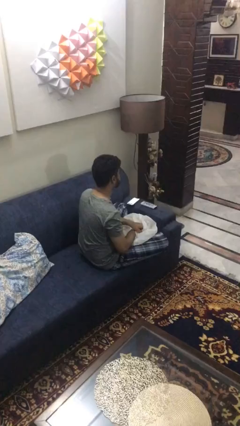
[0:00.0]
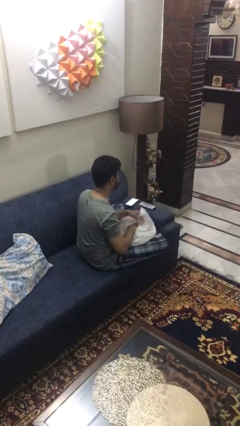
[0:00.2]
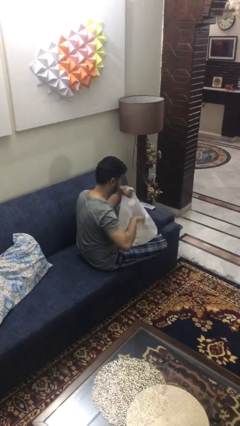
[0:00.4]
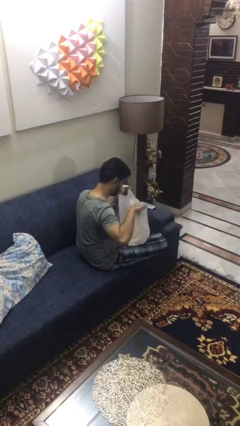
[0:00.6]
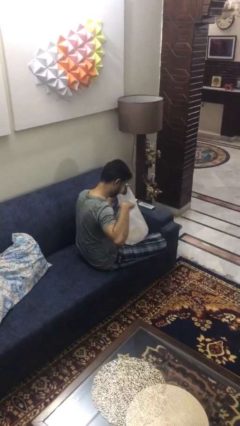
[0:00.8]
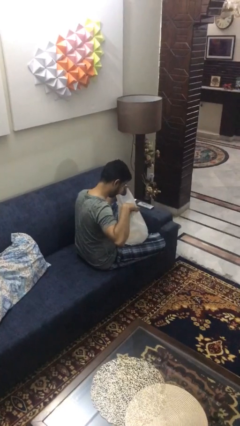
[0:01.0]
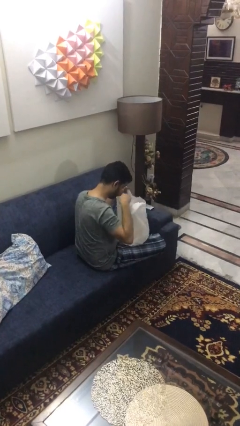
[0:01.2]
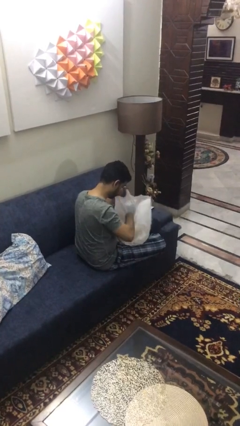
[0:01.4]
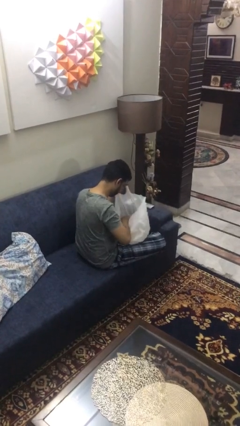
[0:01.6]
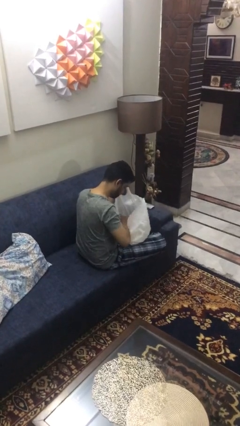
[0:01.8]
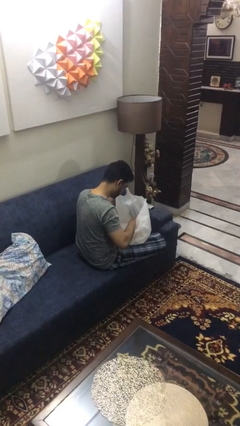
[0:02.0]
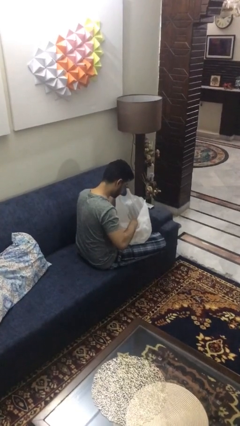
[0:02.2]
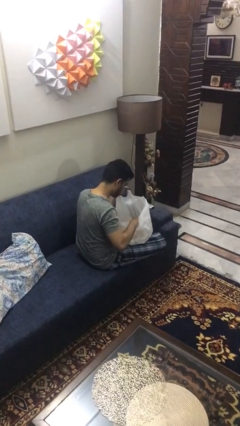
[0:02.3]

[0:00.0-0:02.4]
person searches in bag

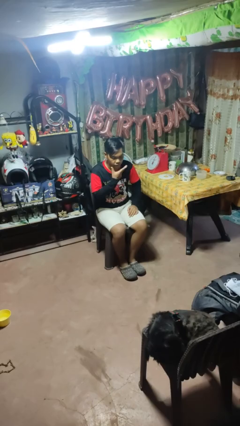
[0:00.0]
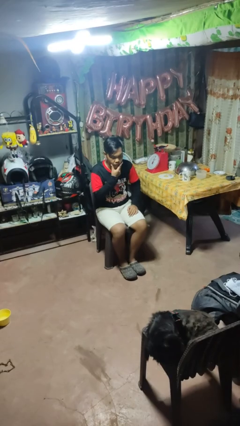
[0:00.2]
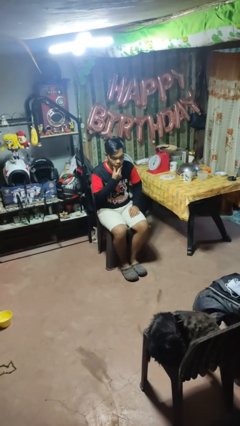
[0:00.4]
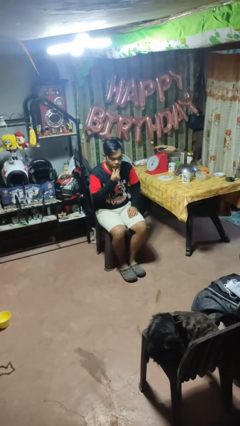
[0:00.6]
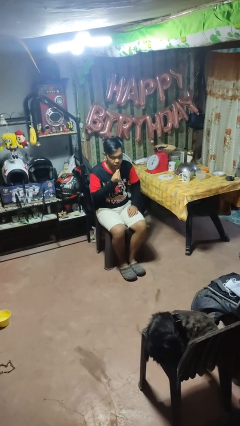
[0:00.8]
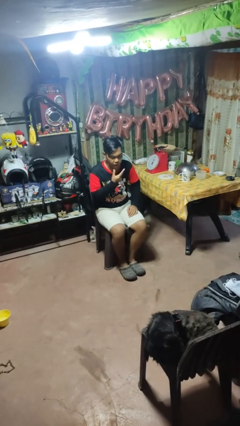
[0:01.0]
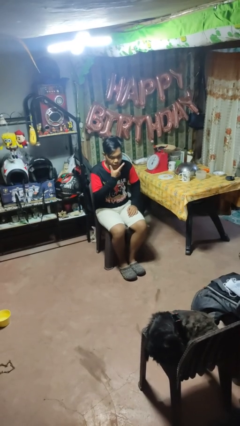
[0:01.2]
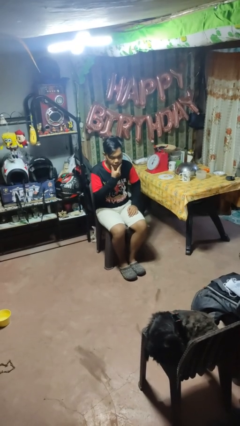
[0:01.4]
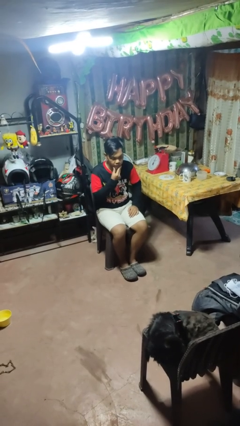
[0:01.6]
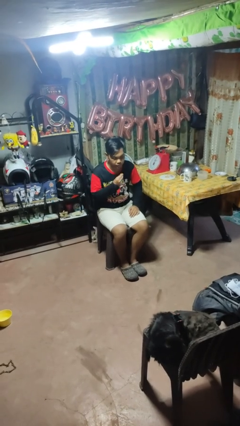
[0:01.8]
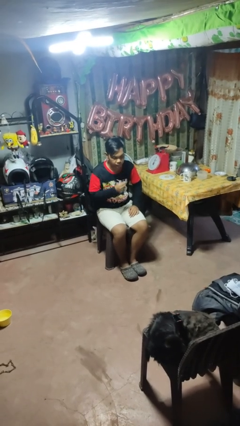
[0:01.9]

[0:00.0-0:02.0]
person strokes chin

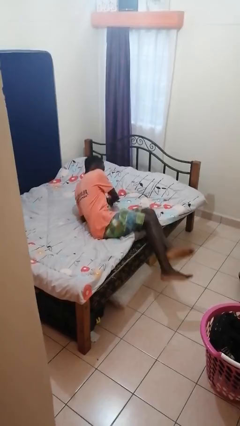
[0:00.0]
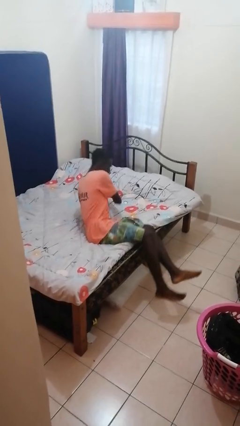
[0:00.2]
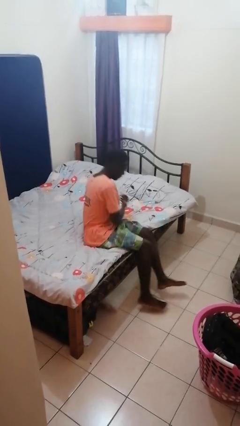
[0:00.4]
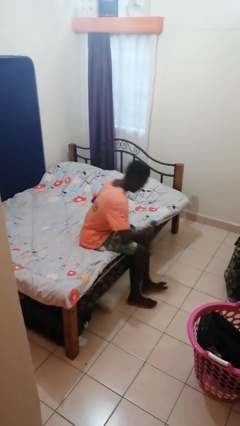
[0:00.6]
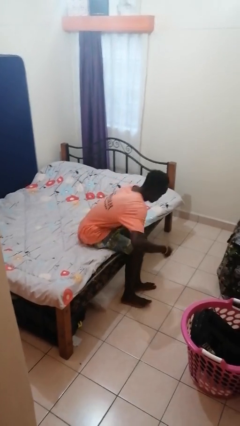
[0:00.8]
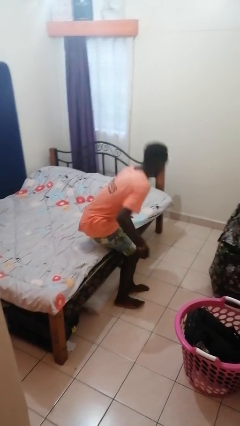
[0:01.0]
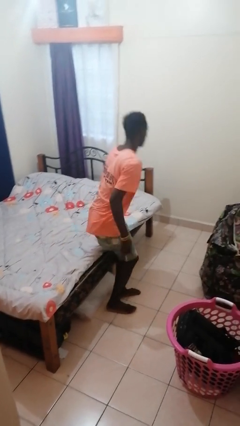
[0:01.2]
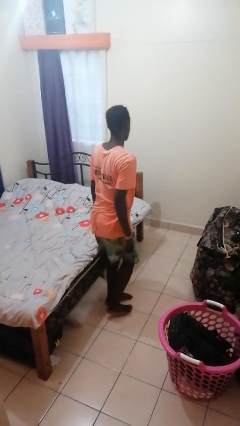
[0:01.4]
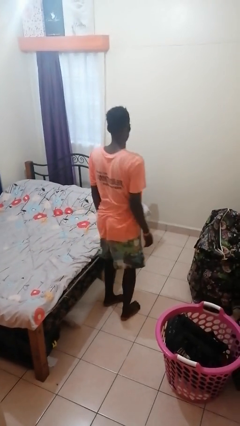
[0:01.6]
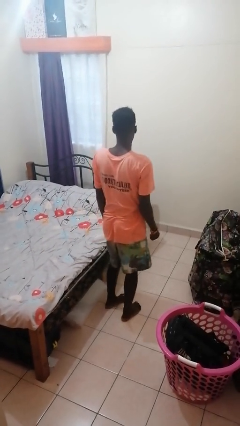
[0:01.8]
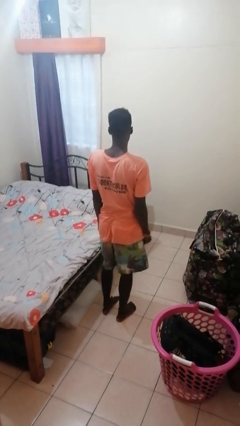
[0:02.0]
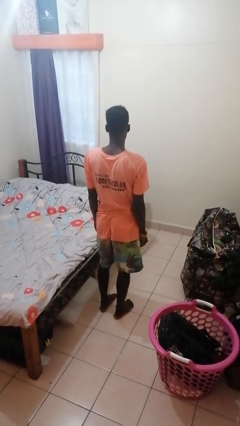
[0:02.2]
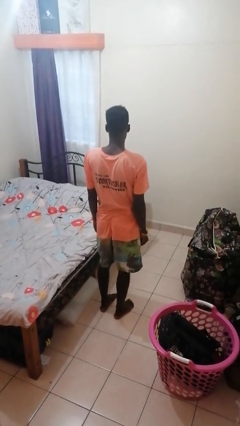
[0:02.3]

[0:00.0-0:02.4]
person stands up

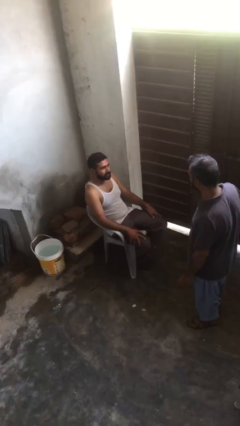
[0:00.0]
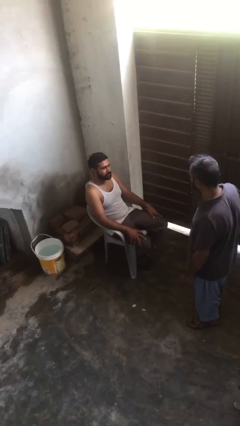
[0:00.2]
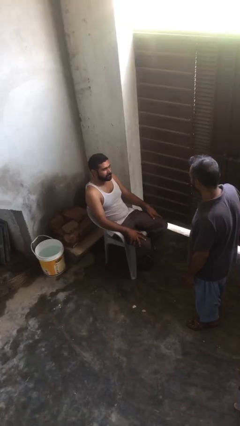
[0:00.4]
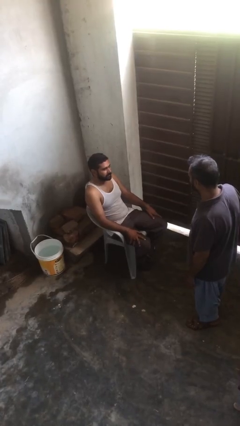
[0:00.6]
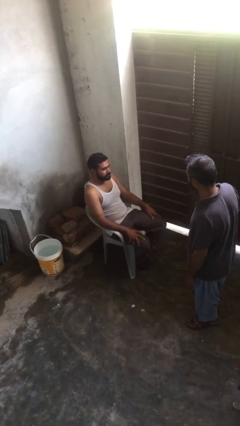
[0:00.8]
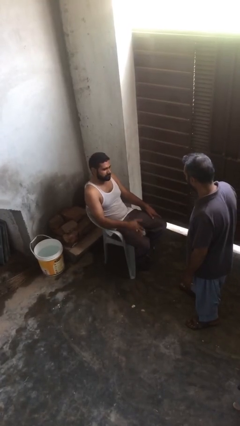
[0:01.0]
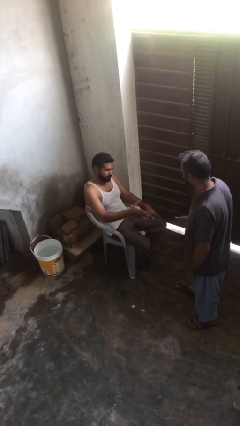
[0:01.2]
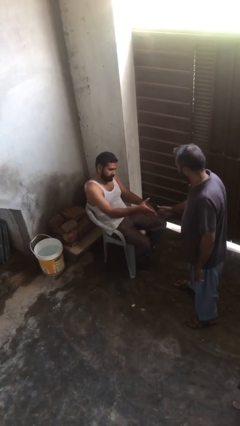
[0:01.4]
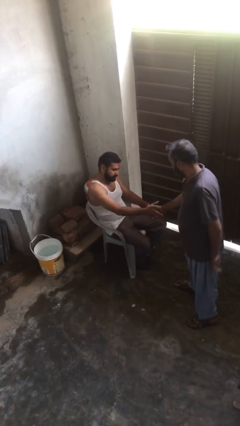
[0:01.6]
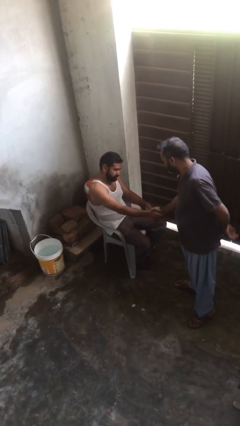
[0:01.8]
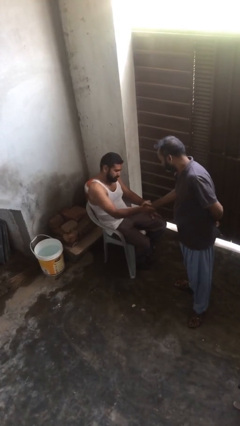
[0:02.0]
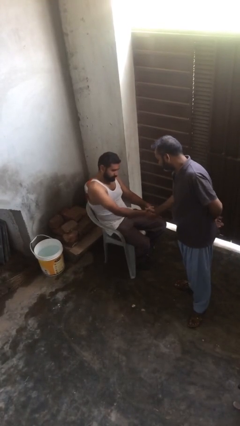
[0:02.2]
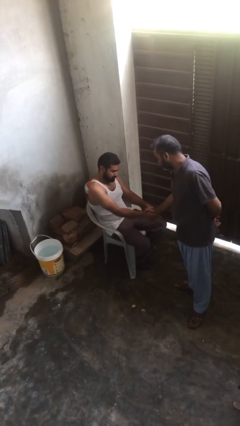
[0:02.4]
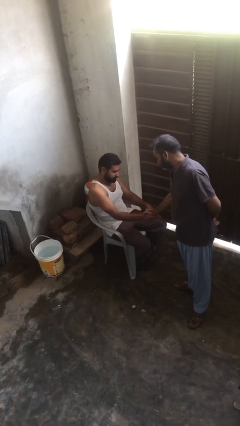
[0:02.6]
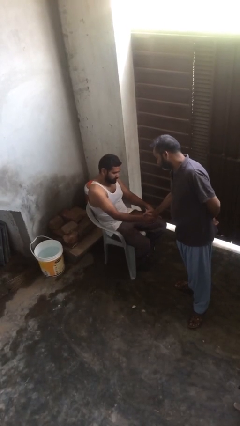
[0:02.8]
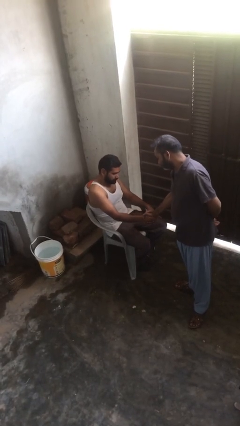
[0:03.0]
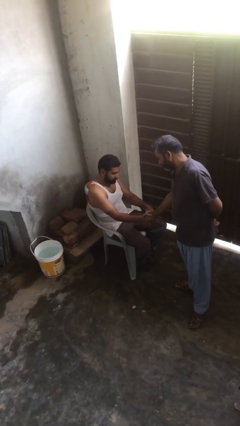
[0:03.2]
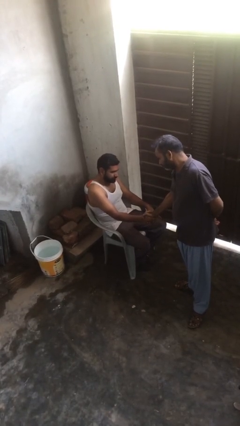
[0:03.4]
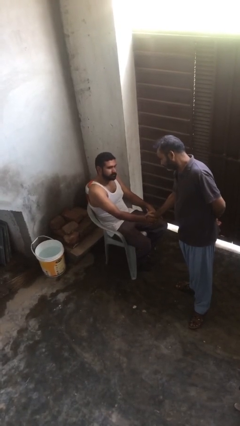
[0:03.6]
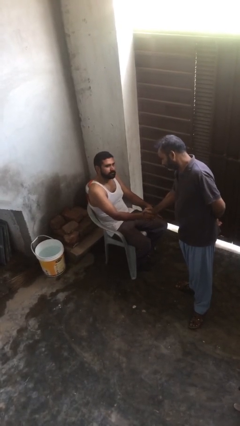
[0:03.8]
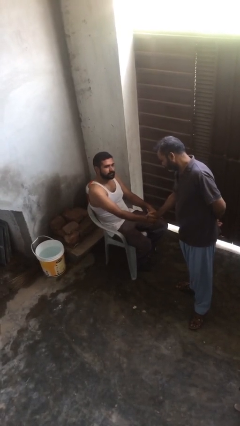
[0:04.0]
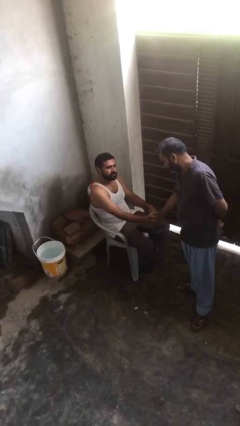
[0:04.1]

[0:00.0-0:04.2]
person shakes hand

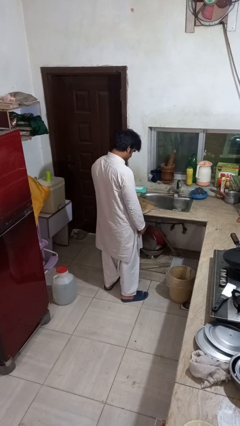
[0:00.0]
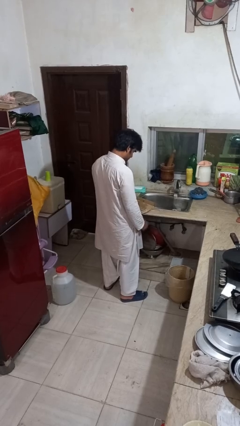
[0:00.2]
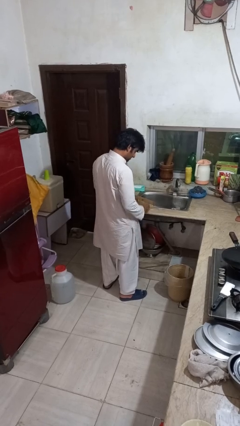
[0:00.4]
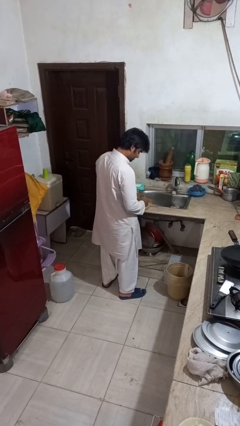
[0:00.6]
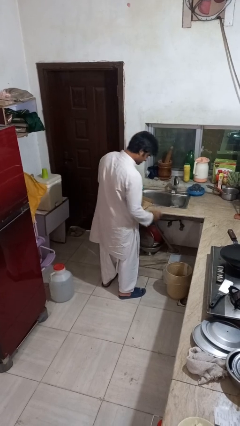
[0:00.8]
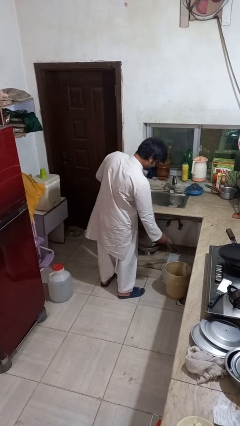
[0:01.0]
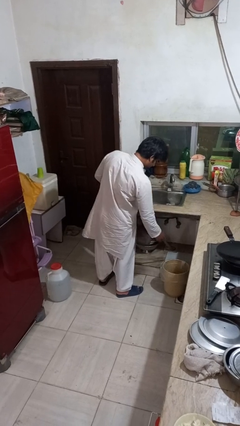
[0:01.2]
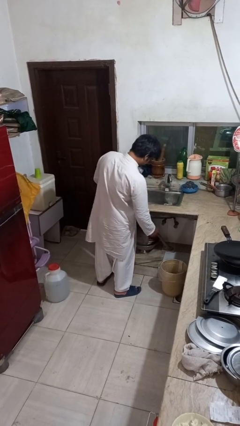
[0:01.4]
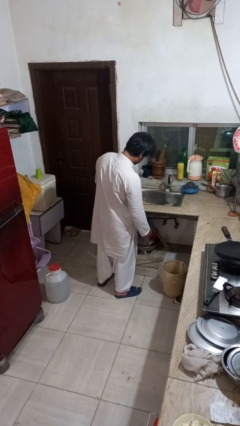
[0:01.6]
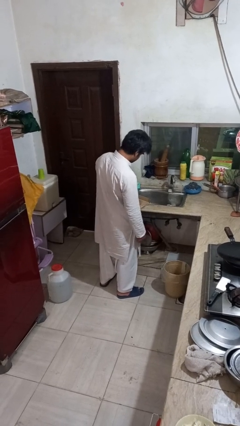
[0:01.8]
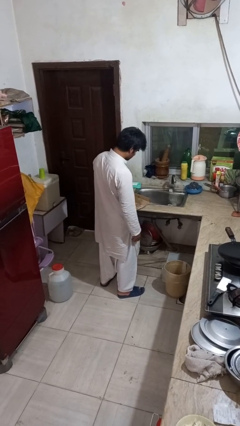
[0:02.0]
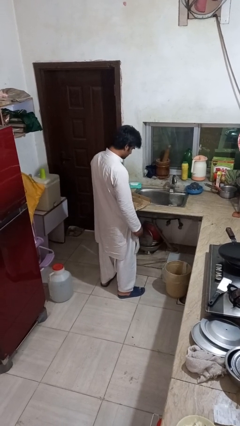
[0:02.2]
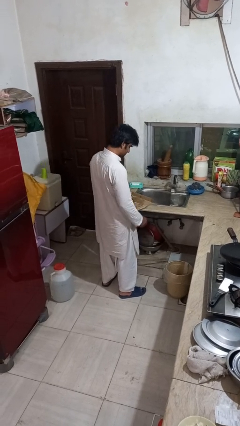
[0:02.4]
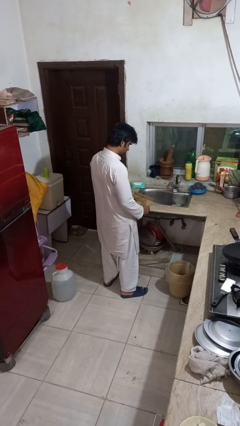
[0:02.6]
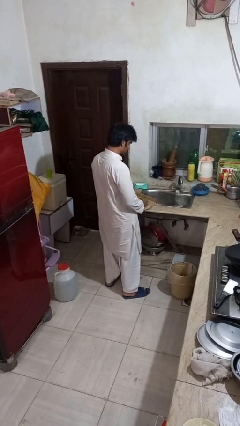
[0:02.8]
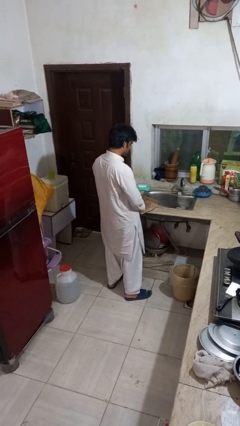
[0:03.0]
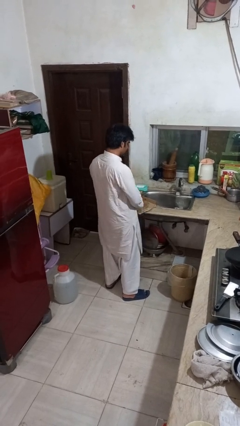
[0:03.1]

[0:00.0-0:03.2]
person discards trash

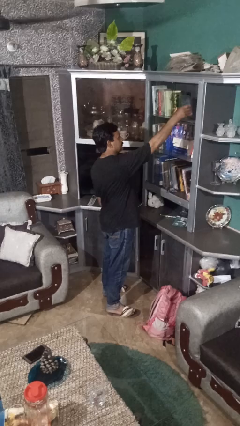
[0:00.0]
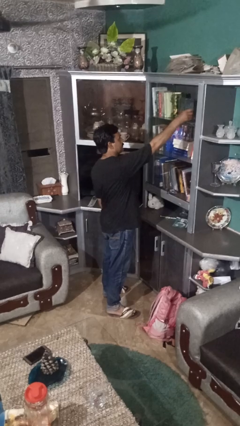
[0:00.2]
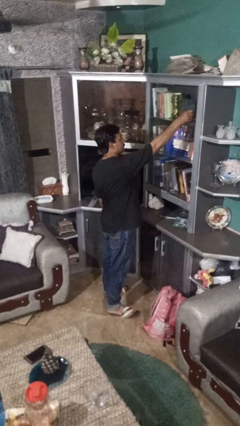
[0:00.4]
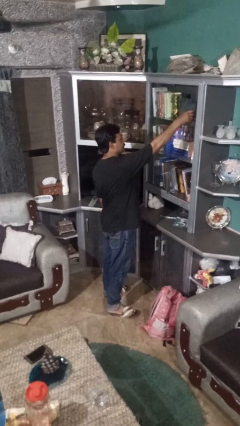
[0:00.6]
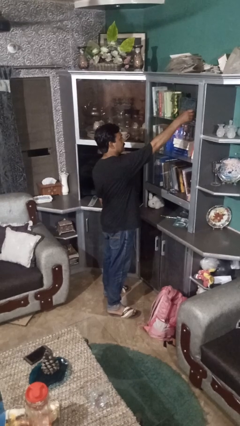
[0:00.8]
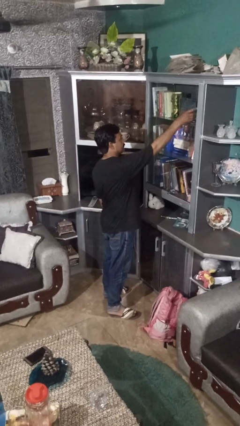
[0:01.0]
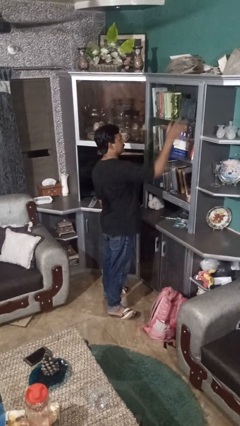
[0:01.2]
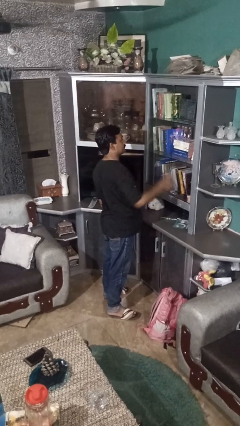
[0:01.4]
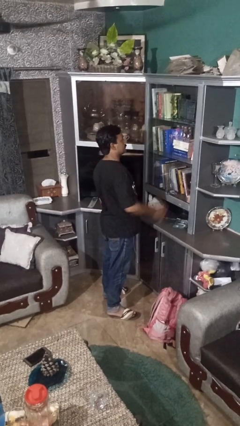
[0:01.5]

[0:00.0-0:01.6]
person puts down object on shelf

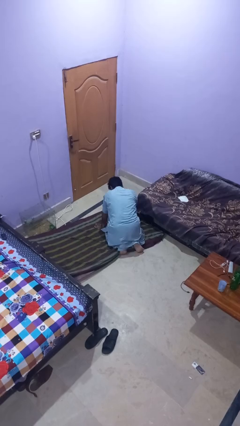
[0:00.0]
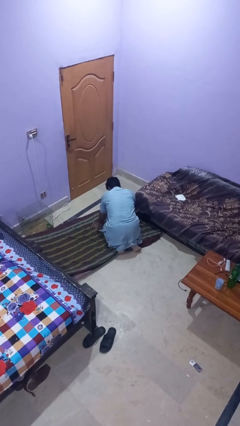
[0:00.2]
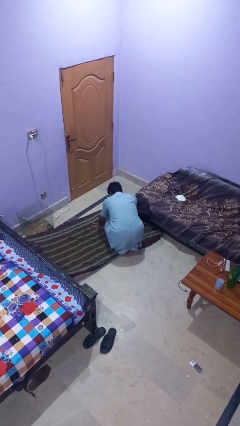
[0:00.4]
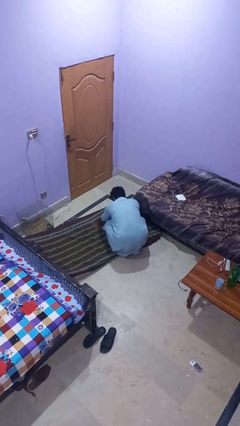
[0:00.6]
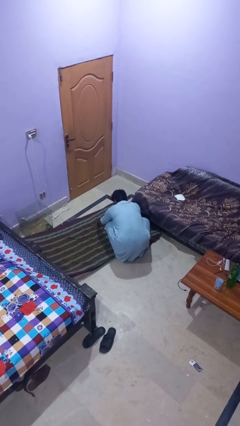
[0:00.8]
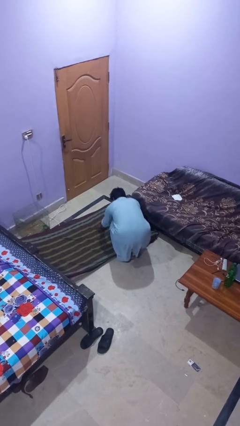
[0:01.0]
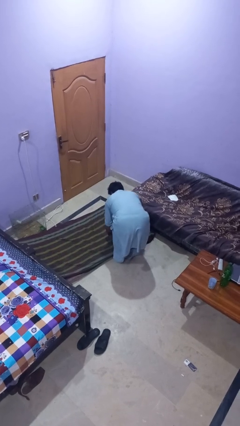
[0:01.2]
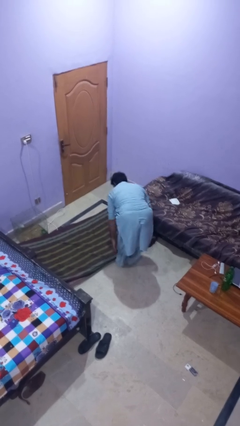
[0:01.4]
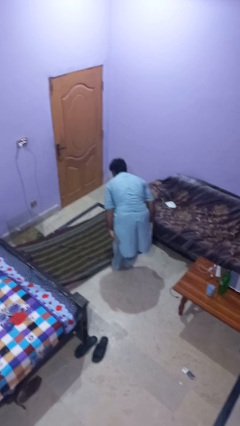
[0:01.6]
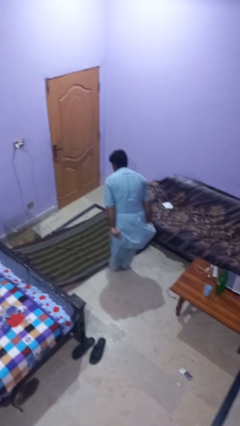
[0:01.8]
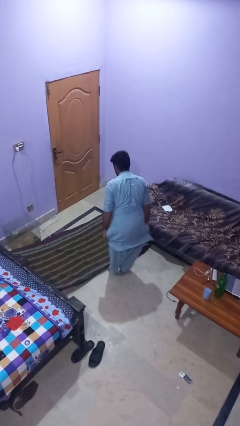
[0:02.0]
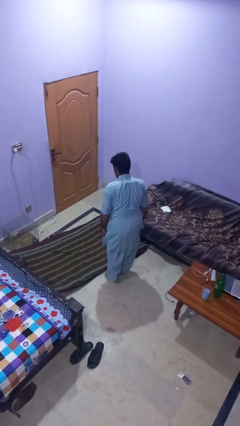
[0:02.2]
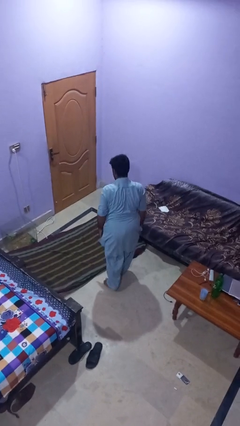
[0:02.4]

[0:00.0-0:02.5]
person stands up from floor
